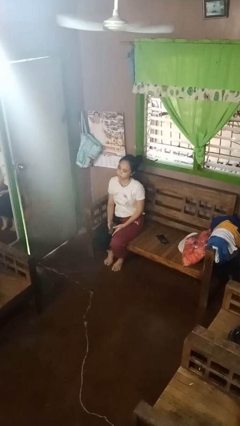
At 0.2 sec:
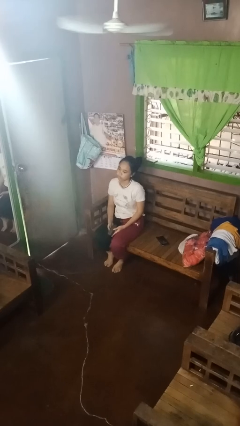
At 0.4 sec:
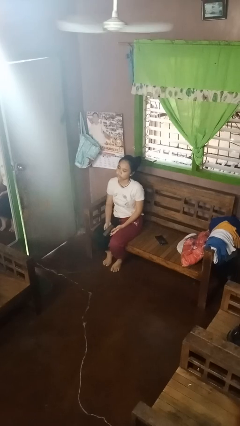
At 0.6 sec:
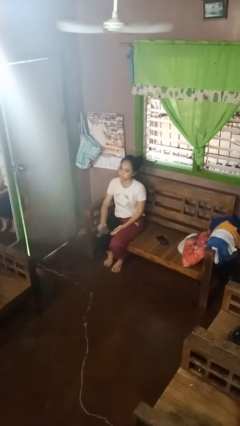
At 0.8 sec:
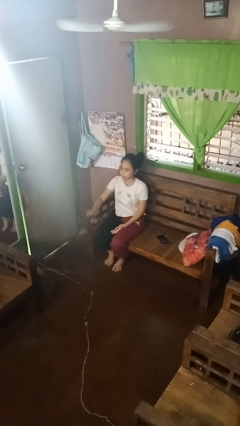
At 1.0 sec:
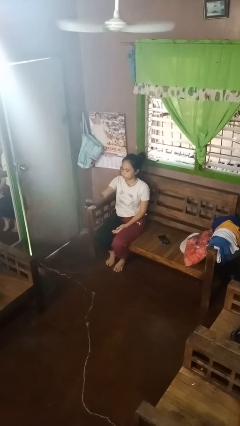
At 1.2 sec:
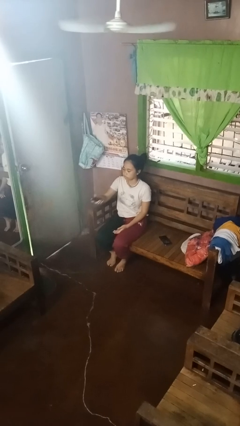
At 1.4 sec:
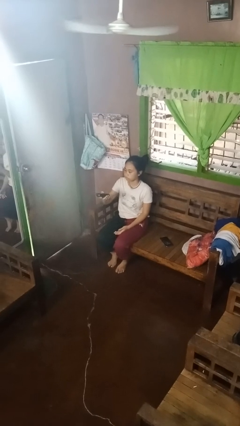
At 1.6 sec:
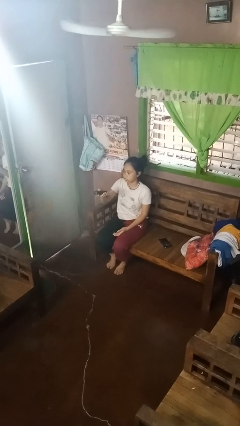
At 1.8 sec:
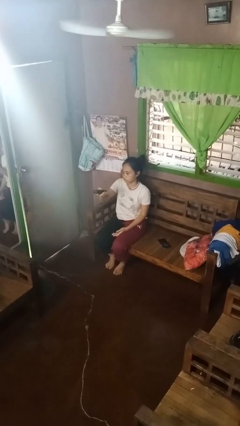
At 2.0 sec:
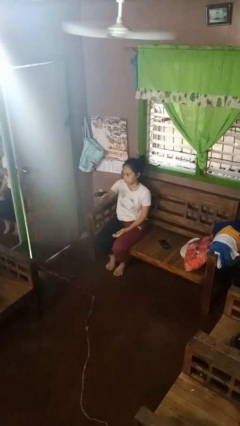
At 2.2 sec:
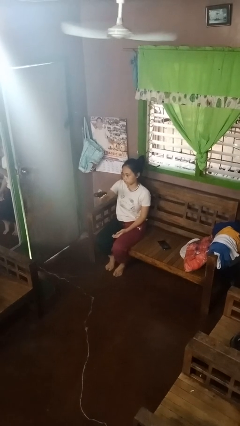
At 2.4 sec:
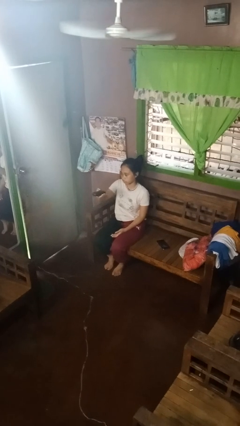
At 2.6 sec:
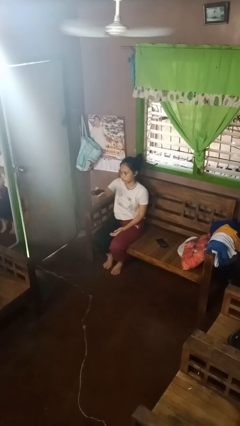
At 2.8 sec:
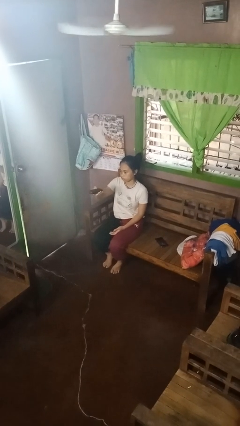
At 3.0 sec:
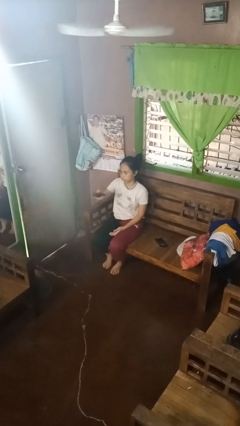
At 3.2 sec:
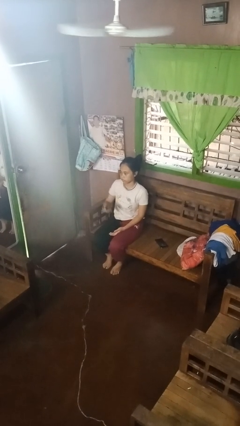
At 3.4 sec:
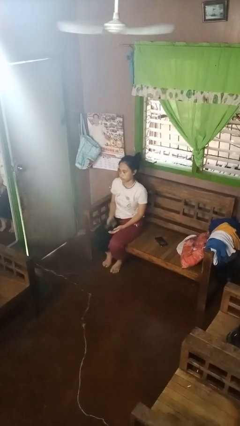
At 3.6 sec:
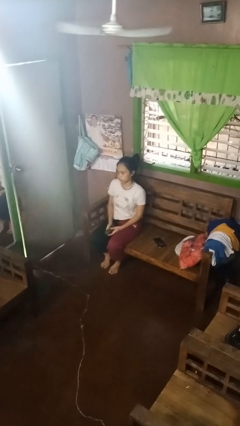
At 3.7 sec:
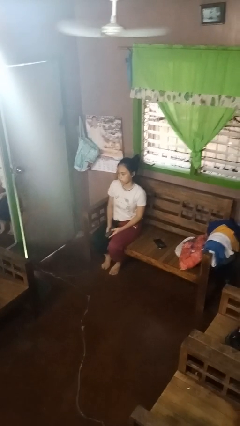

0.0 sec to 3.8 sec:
person uses television remote

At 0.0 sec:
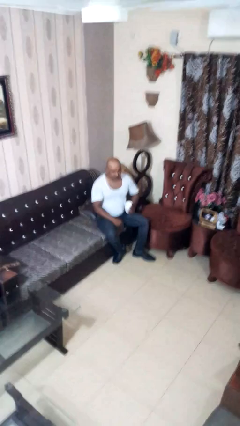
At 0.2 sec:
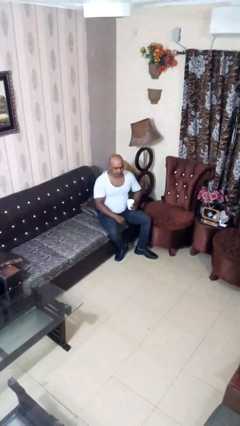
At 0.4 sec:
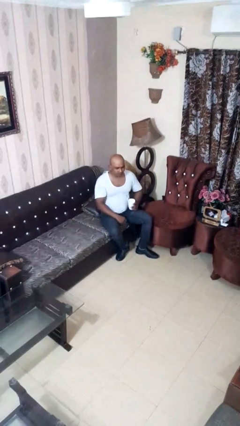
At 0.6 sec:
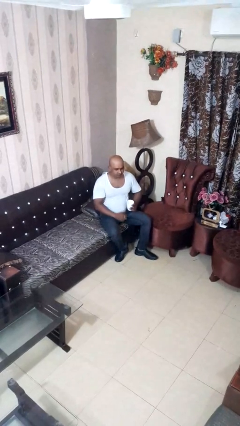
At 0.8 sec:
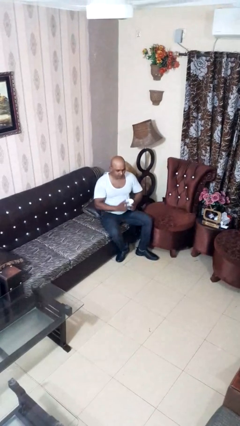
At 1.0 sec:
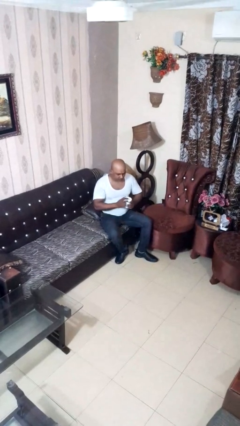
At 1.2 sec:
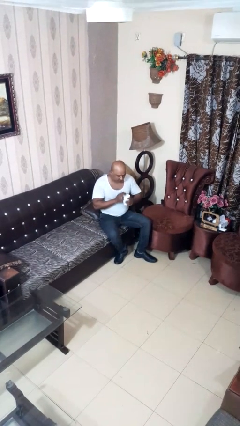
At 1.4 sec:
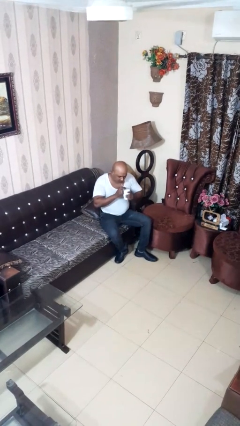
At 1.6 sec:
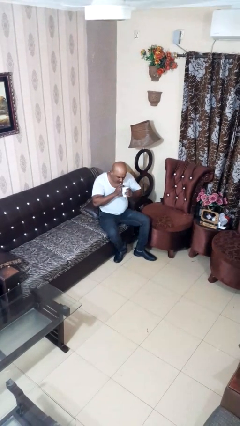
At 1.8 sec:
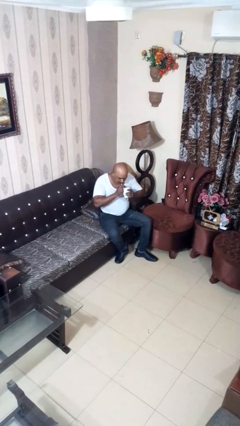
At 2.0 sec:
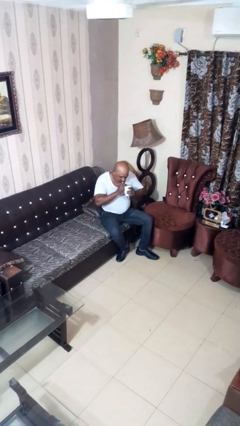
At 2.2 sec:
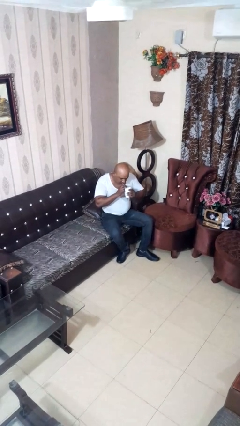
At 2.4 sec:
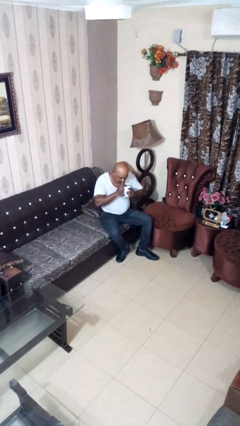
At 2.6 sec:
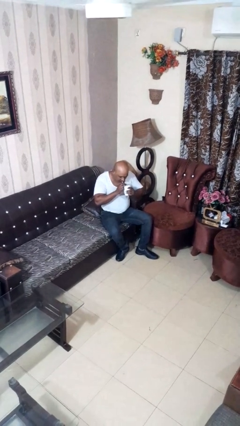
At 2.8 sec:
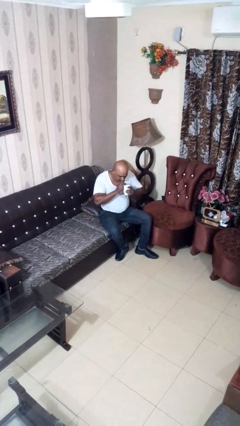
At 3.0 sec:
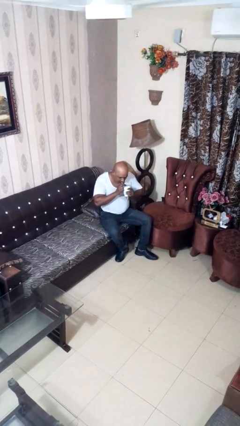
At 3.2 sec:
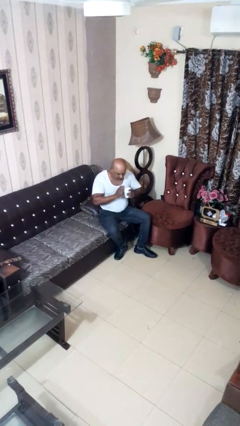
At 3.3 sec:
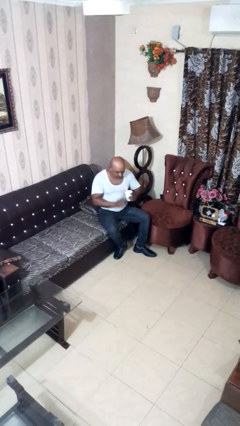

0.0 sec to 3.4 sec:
person drinks from straw

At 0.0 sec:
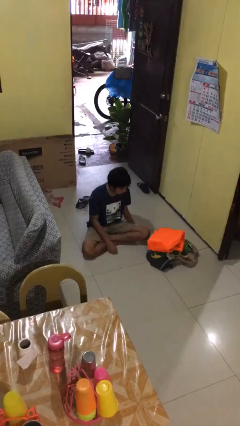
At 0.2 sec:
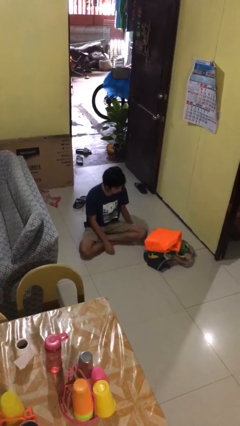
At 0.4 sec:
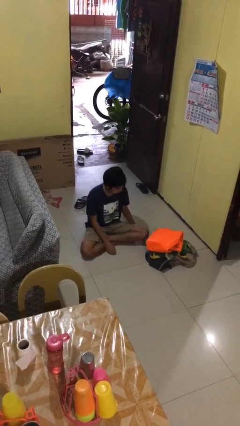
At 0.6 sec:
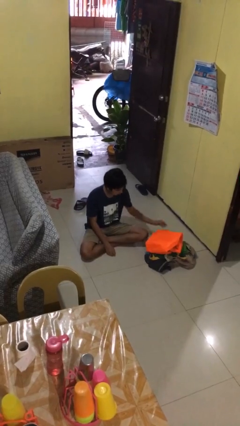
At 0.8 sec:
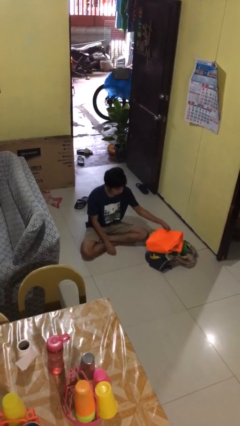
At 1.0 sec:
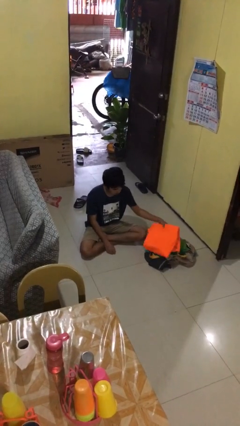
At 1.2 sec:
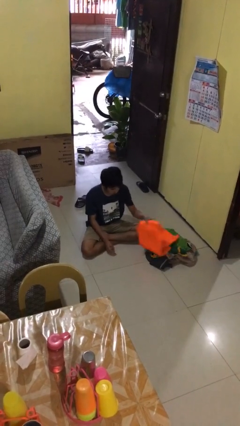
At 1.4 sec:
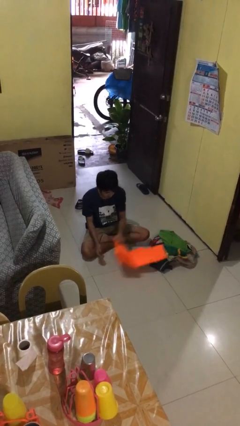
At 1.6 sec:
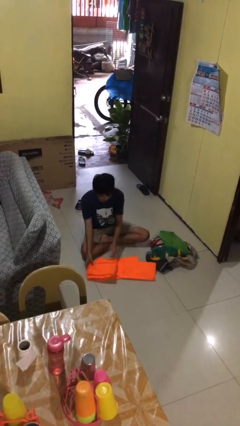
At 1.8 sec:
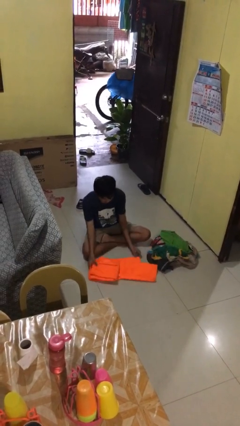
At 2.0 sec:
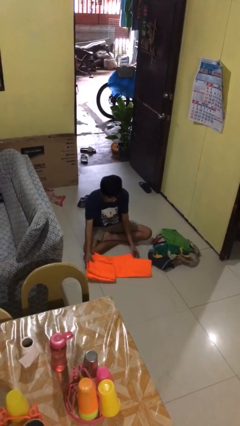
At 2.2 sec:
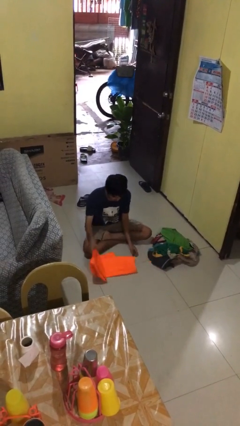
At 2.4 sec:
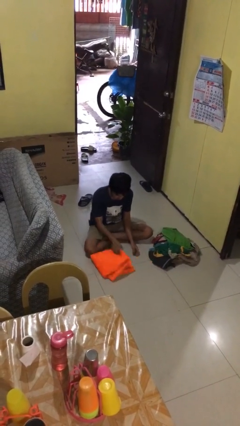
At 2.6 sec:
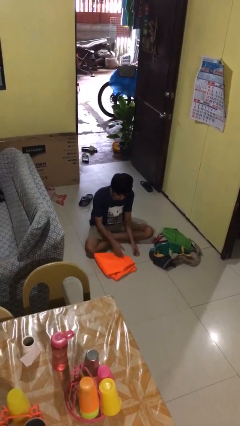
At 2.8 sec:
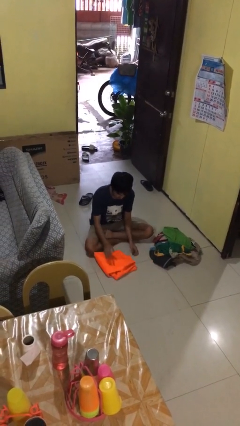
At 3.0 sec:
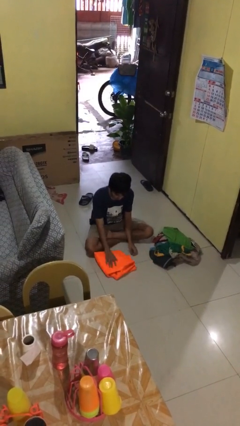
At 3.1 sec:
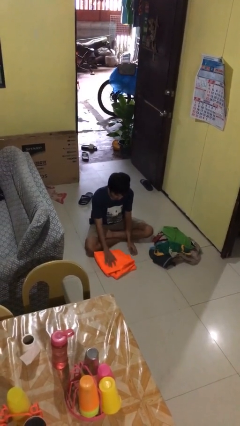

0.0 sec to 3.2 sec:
person folds pants

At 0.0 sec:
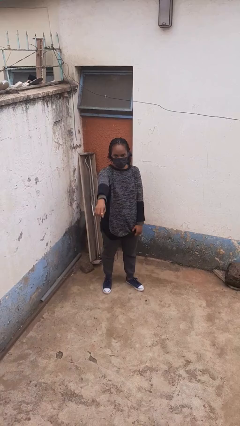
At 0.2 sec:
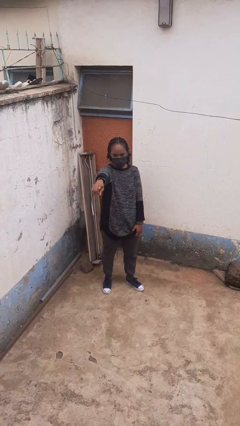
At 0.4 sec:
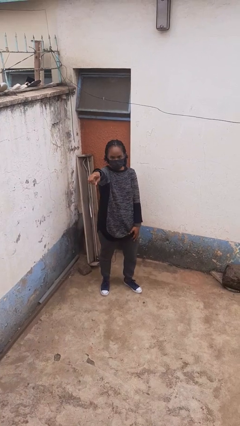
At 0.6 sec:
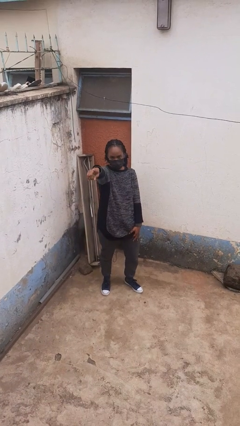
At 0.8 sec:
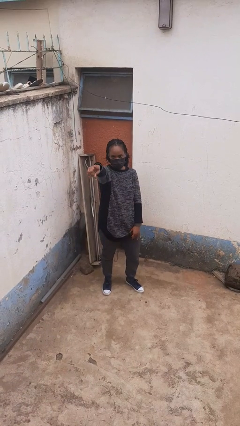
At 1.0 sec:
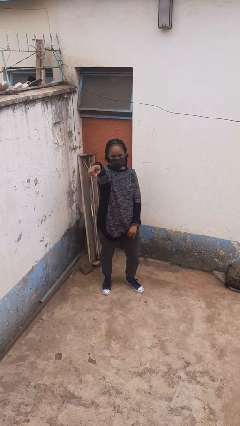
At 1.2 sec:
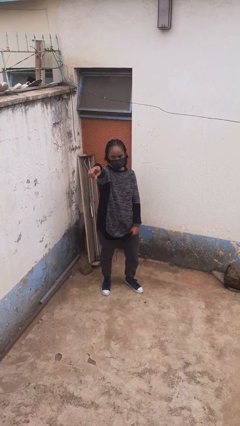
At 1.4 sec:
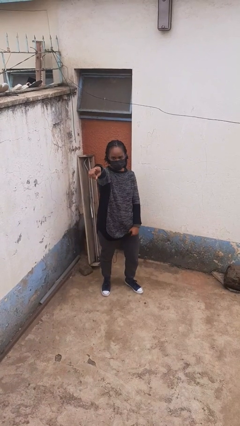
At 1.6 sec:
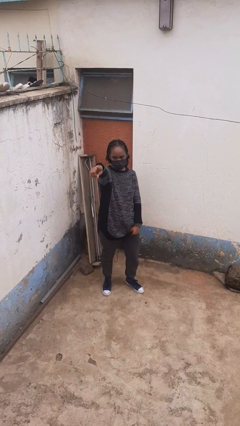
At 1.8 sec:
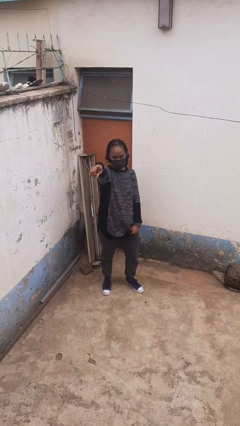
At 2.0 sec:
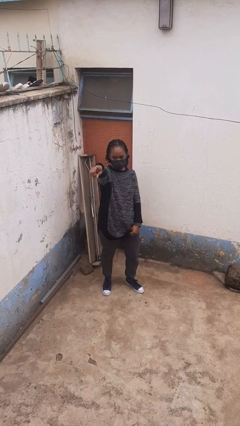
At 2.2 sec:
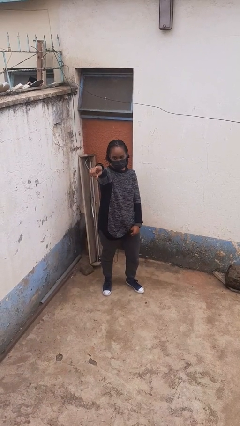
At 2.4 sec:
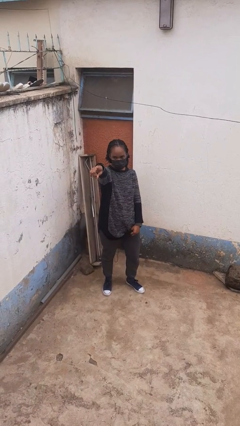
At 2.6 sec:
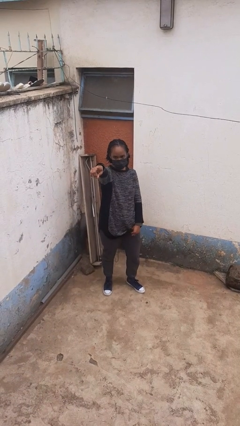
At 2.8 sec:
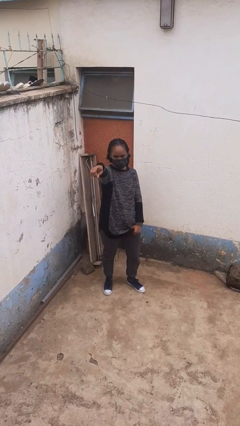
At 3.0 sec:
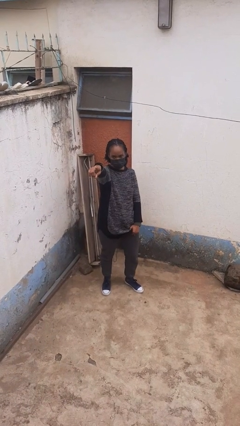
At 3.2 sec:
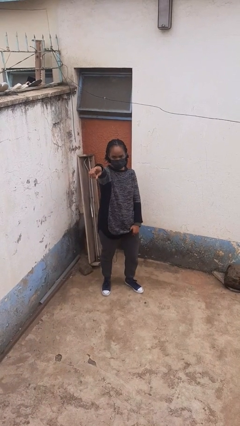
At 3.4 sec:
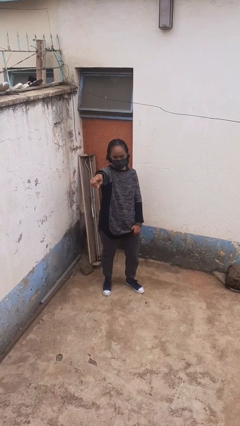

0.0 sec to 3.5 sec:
person points at person

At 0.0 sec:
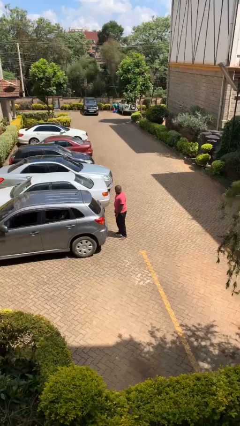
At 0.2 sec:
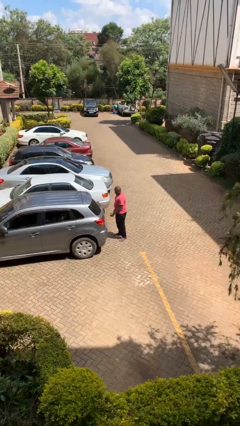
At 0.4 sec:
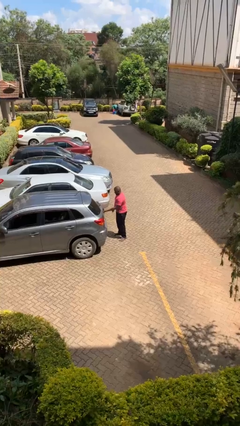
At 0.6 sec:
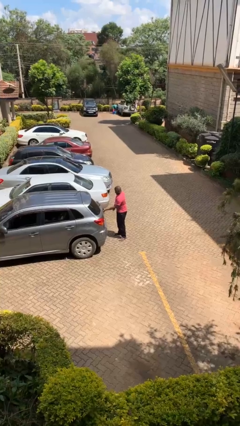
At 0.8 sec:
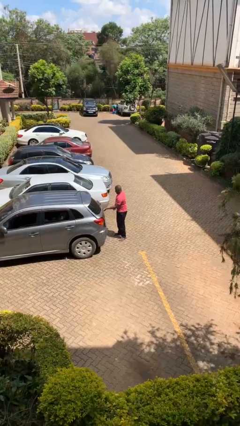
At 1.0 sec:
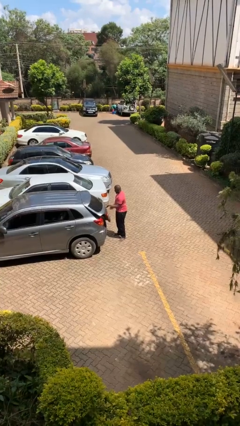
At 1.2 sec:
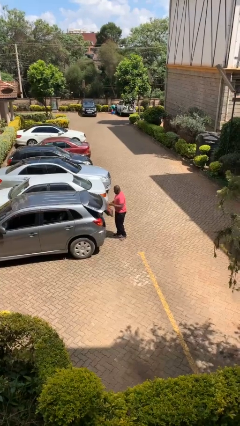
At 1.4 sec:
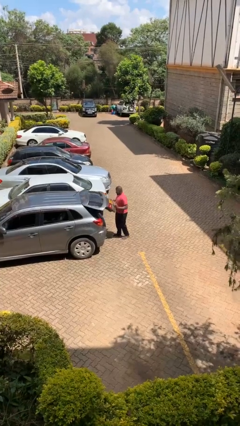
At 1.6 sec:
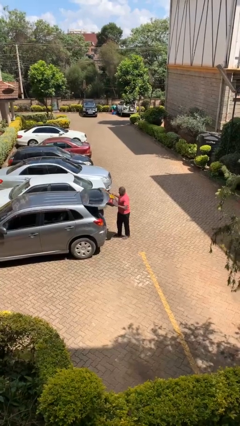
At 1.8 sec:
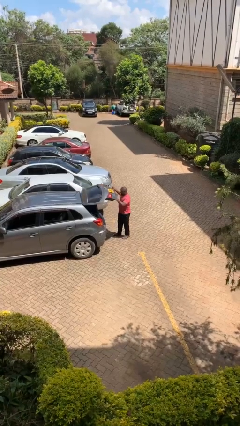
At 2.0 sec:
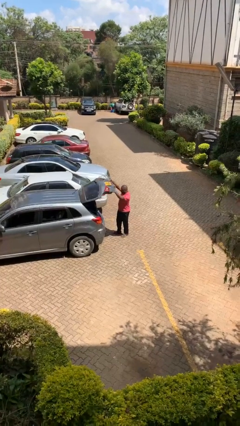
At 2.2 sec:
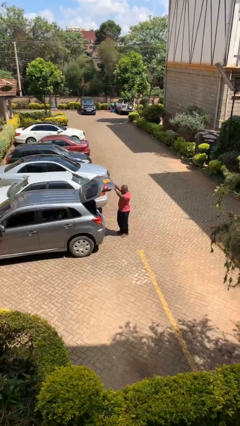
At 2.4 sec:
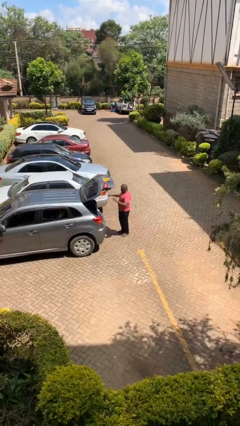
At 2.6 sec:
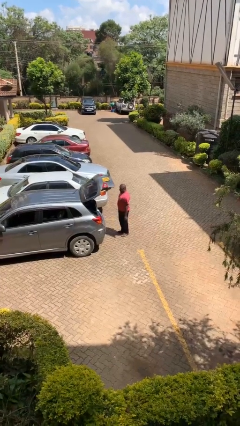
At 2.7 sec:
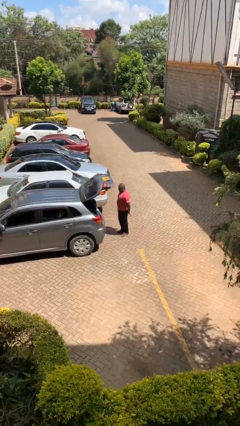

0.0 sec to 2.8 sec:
person opens car trunk

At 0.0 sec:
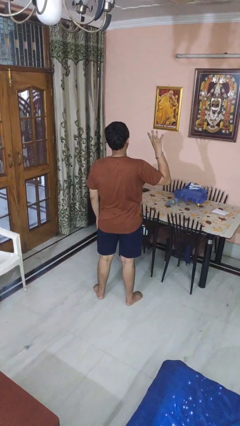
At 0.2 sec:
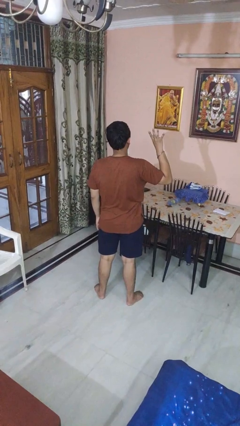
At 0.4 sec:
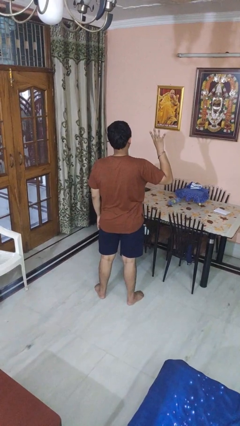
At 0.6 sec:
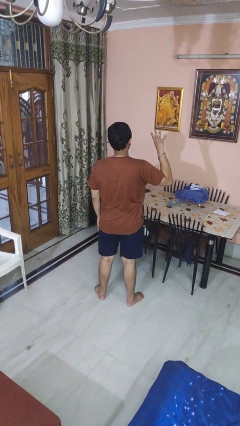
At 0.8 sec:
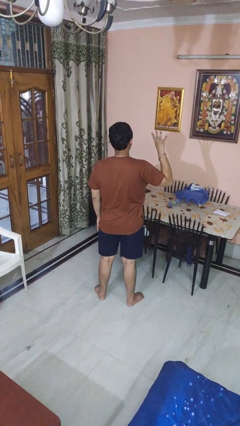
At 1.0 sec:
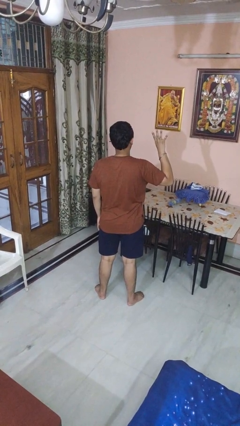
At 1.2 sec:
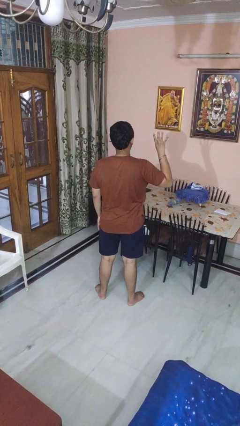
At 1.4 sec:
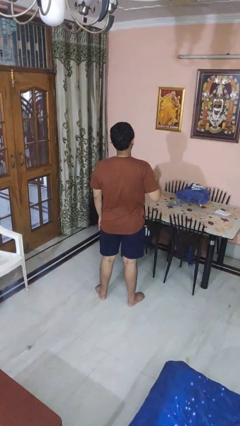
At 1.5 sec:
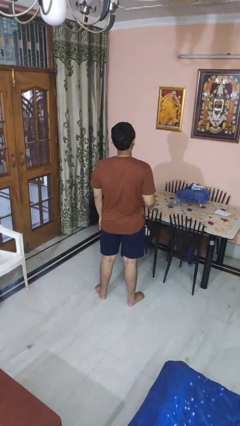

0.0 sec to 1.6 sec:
person gestures number four
